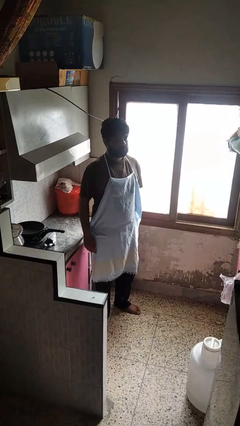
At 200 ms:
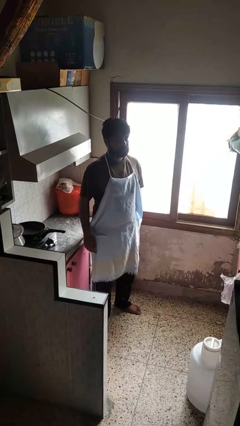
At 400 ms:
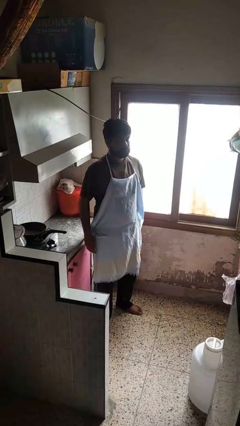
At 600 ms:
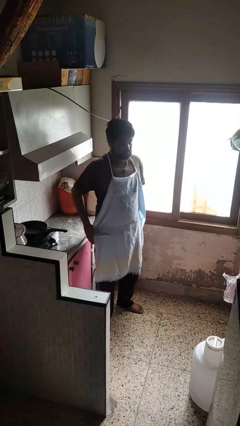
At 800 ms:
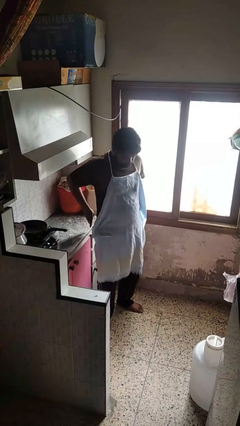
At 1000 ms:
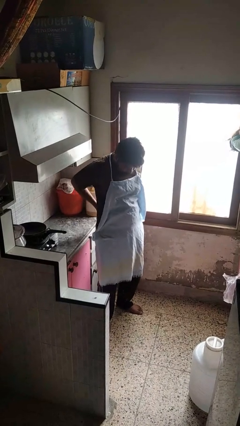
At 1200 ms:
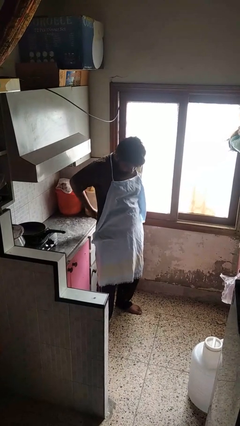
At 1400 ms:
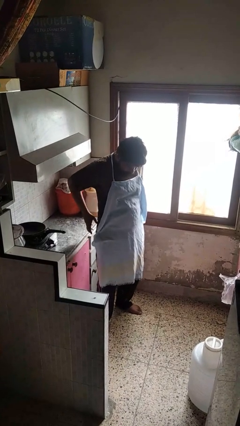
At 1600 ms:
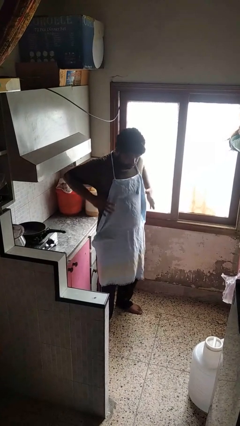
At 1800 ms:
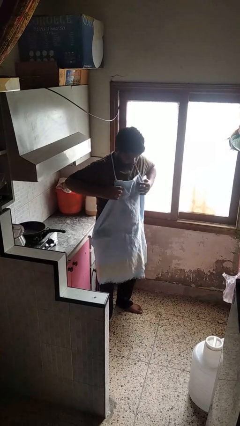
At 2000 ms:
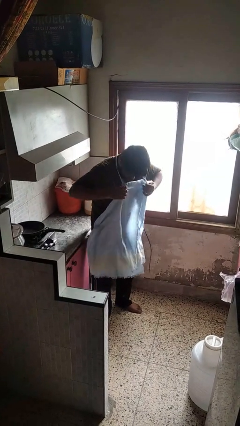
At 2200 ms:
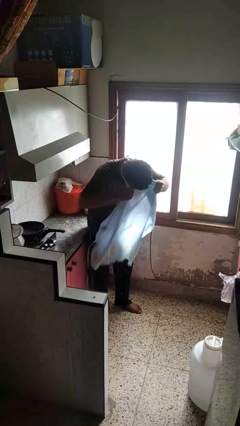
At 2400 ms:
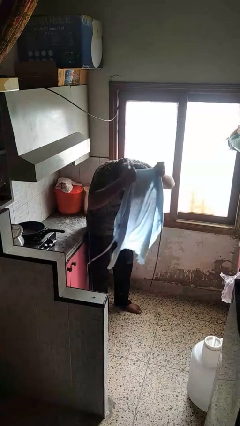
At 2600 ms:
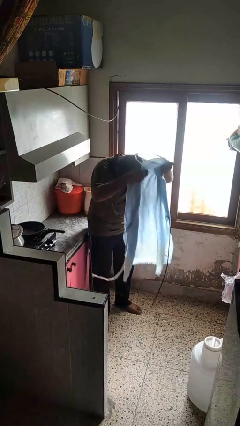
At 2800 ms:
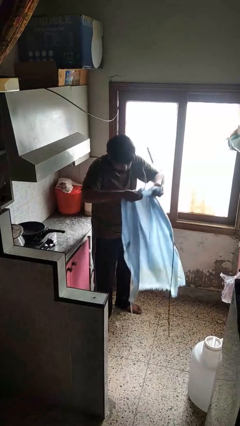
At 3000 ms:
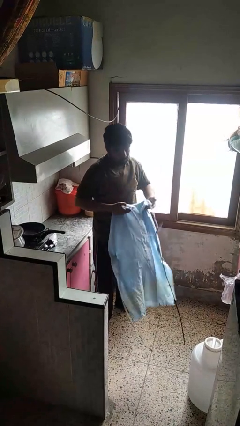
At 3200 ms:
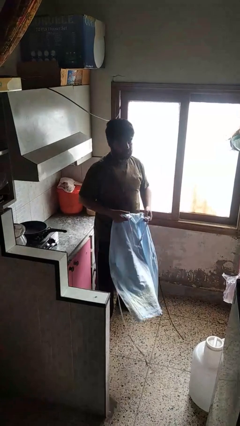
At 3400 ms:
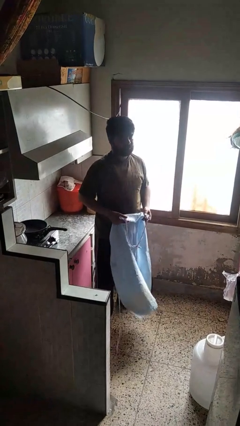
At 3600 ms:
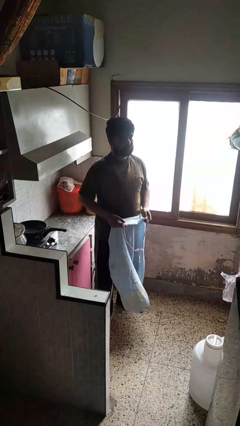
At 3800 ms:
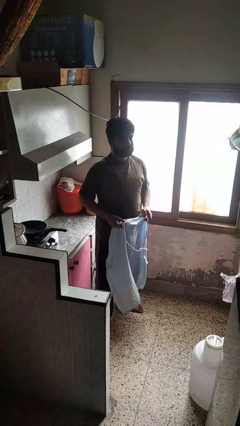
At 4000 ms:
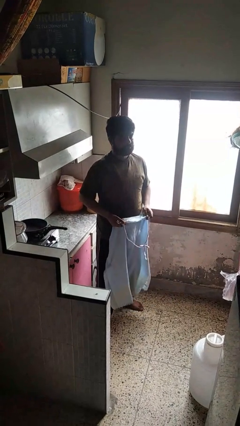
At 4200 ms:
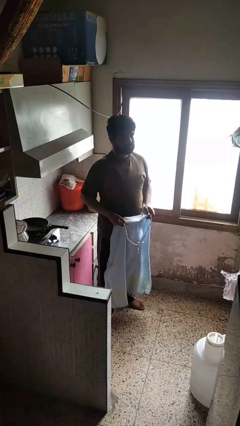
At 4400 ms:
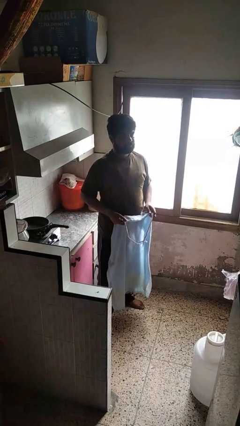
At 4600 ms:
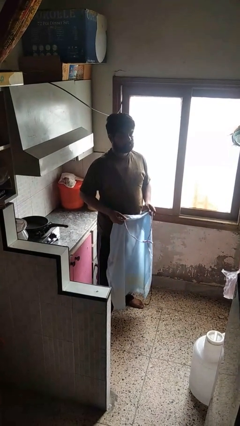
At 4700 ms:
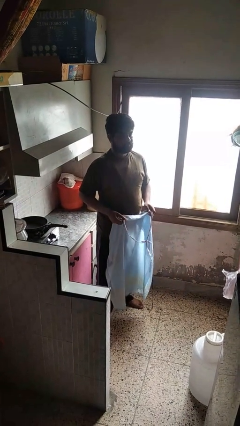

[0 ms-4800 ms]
person takes off apron

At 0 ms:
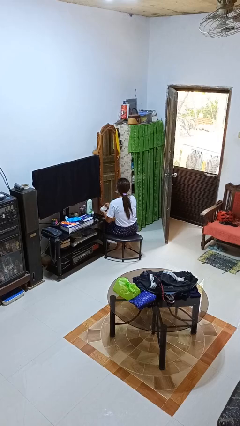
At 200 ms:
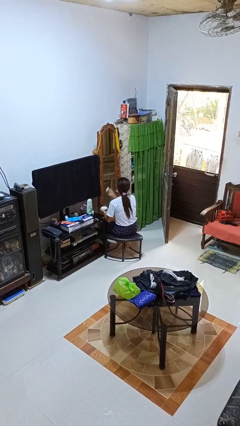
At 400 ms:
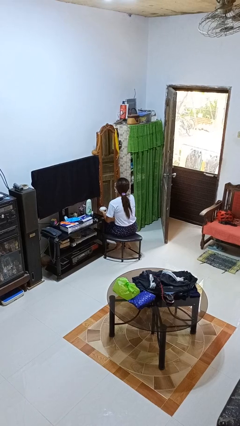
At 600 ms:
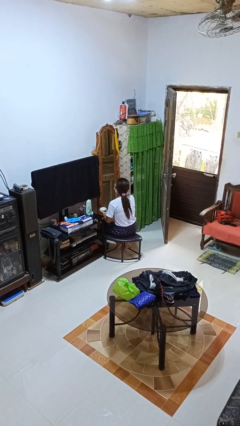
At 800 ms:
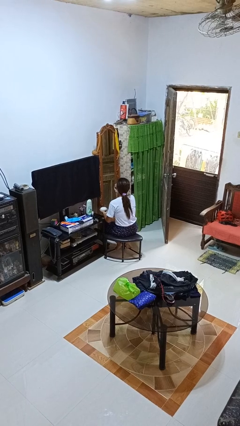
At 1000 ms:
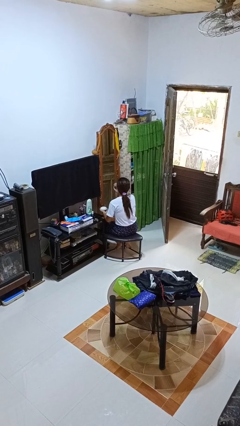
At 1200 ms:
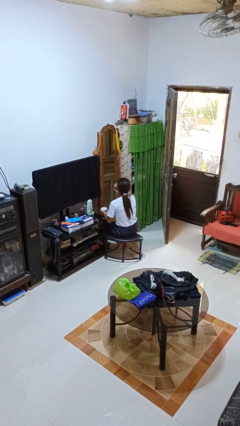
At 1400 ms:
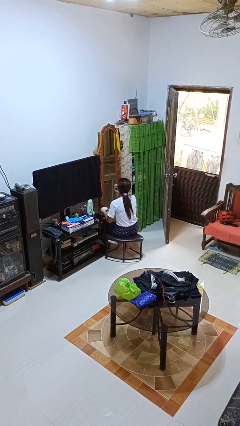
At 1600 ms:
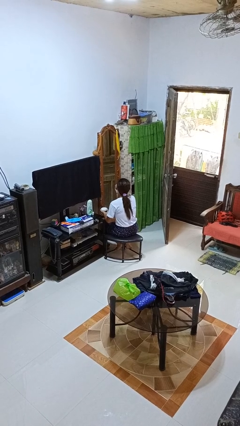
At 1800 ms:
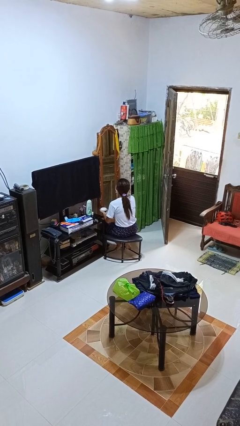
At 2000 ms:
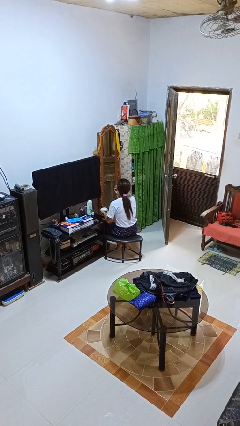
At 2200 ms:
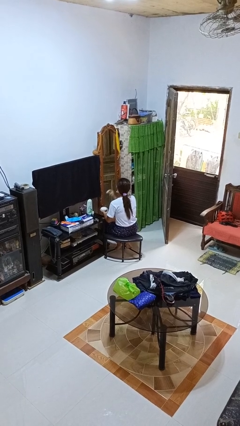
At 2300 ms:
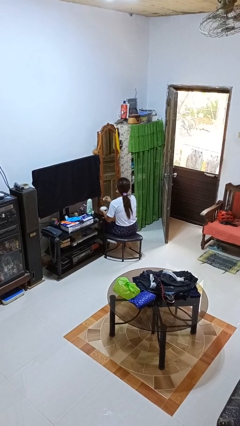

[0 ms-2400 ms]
person applies foundation makeup

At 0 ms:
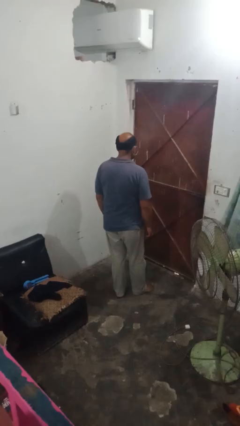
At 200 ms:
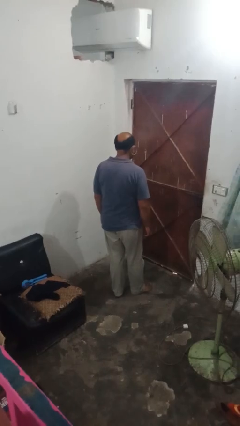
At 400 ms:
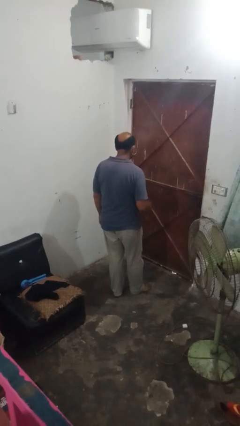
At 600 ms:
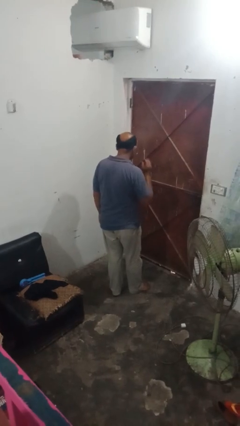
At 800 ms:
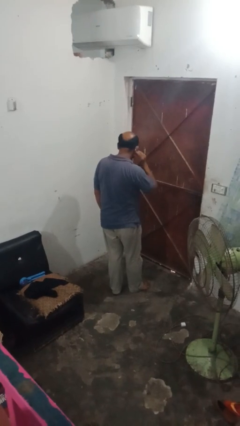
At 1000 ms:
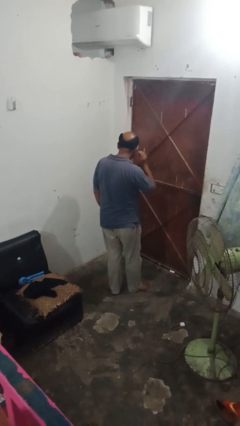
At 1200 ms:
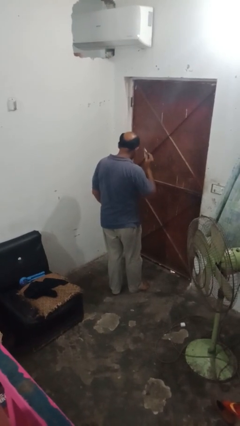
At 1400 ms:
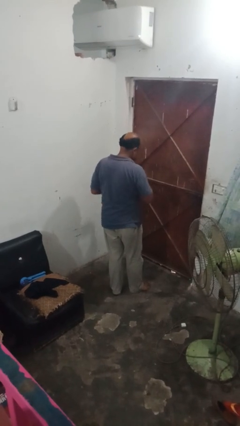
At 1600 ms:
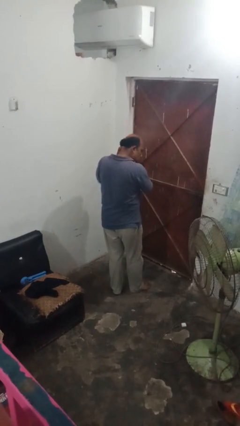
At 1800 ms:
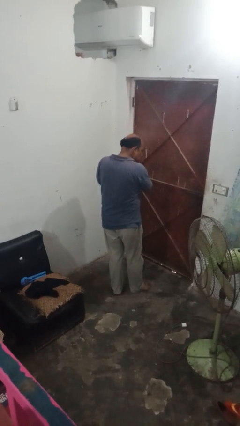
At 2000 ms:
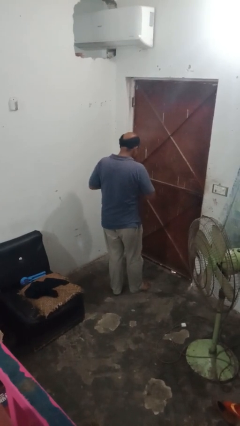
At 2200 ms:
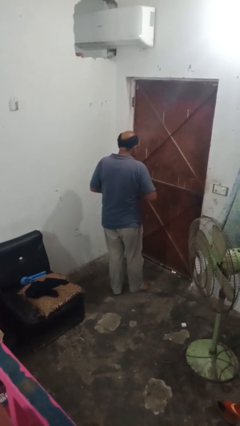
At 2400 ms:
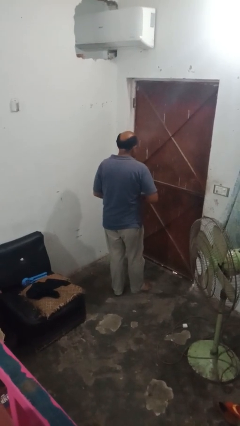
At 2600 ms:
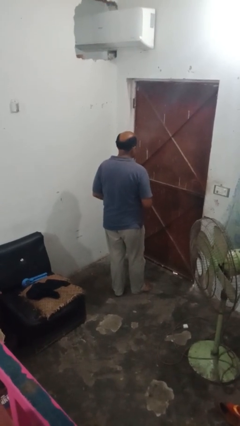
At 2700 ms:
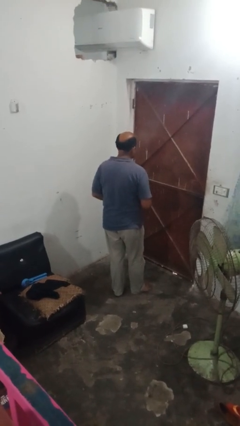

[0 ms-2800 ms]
person takes off earrings

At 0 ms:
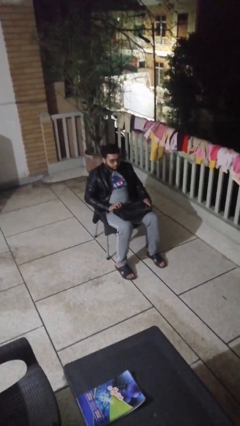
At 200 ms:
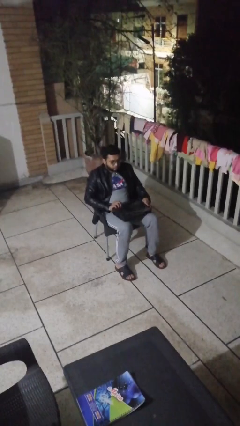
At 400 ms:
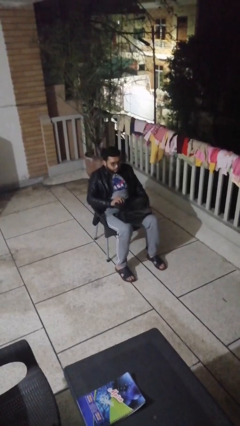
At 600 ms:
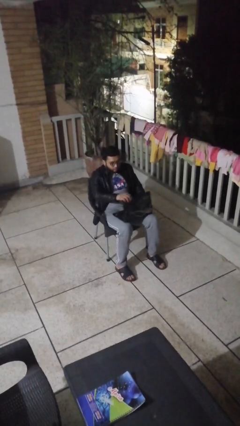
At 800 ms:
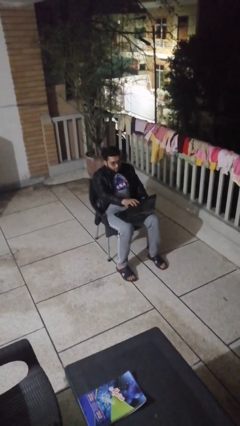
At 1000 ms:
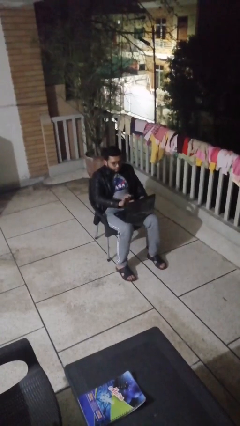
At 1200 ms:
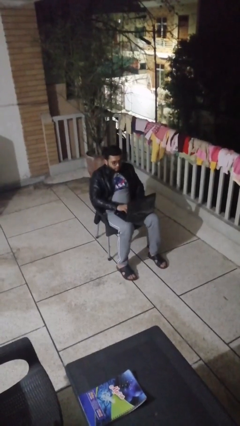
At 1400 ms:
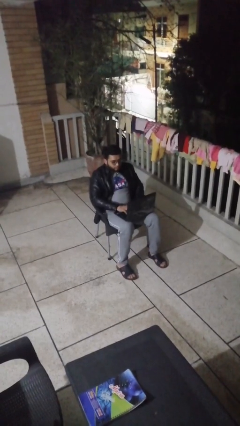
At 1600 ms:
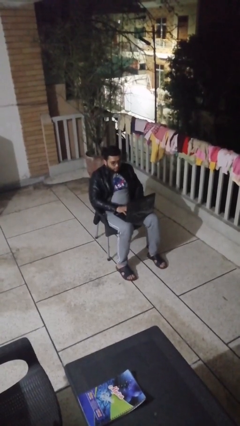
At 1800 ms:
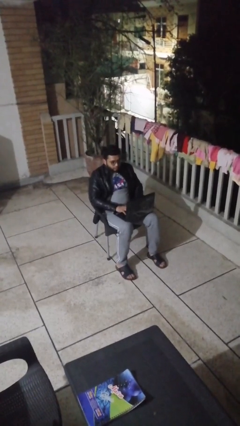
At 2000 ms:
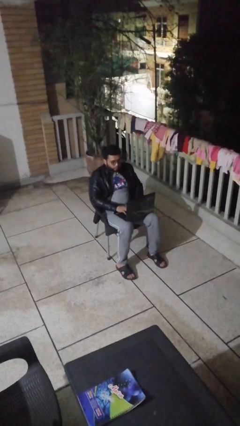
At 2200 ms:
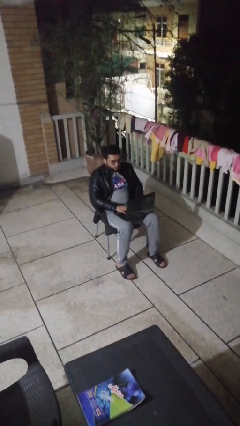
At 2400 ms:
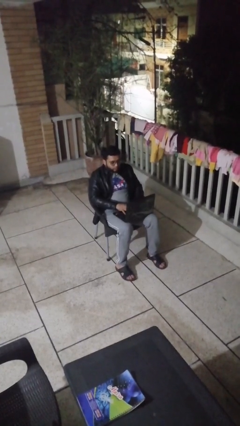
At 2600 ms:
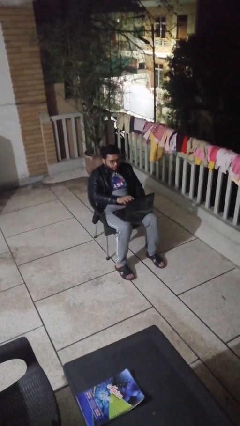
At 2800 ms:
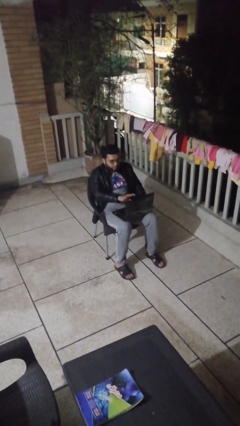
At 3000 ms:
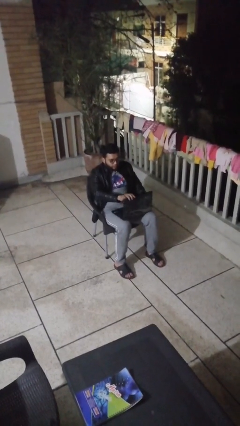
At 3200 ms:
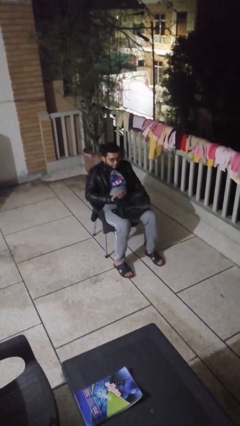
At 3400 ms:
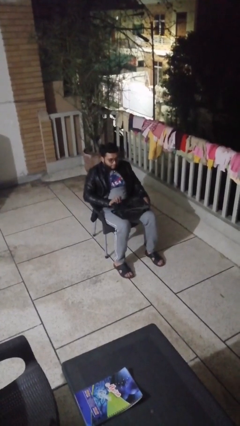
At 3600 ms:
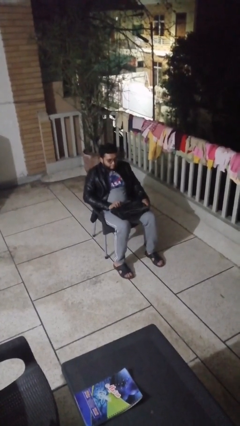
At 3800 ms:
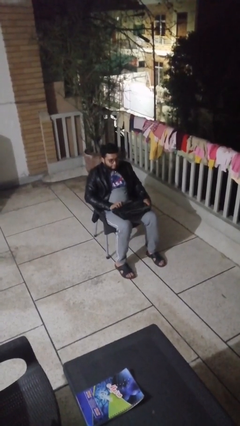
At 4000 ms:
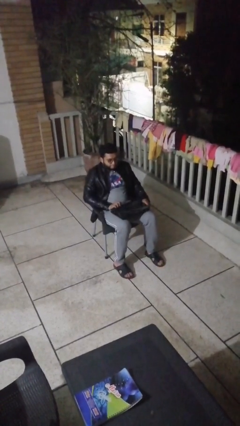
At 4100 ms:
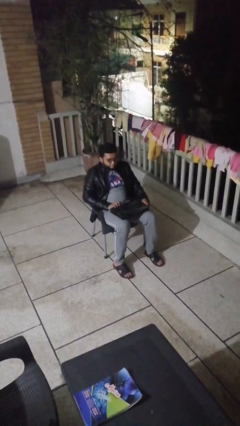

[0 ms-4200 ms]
person interacts with laptop

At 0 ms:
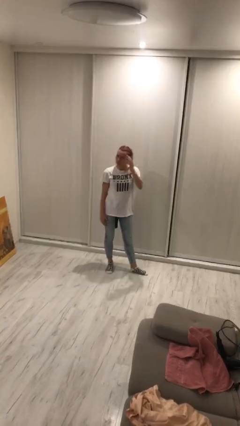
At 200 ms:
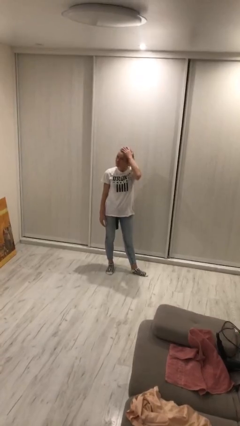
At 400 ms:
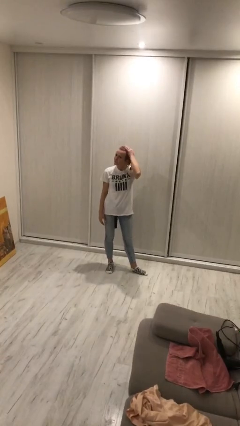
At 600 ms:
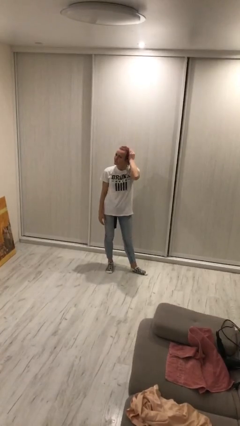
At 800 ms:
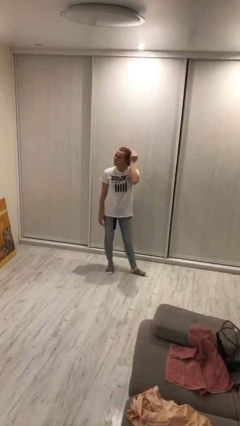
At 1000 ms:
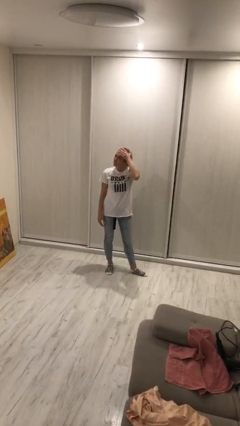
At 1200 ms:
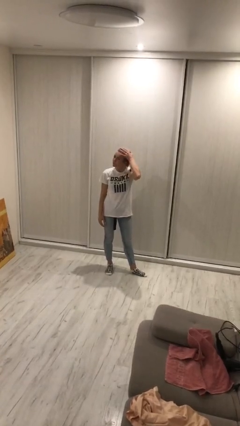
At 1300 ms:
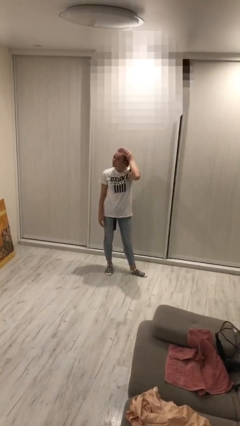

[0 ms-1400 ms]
person pats head

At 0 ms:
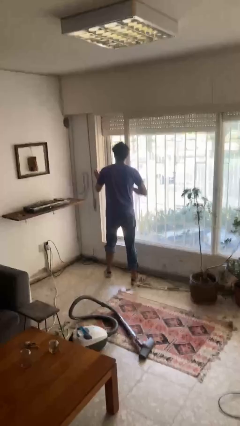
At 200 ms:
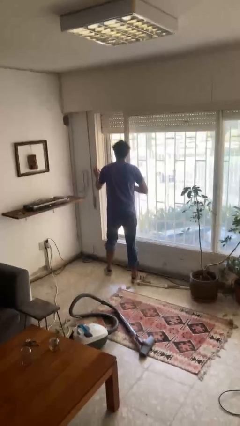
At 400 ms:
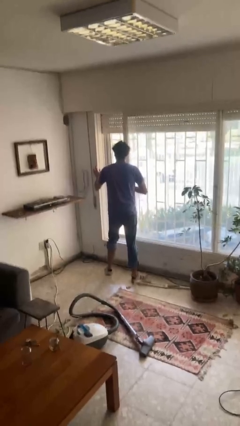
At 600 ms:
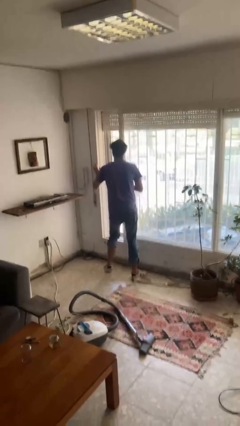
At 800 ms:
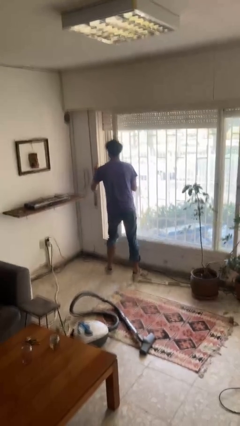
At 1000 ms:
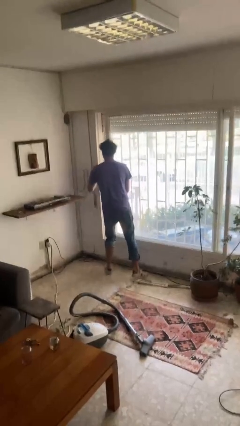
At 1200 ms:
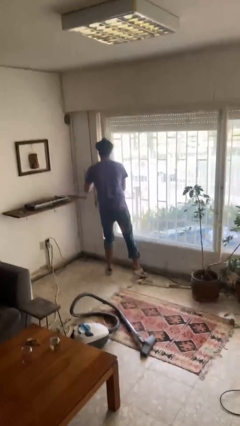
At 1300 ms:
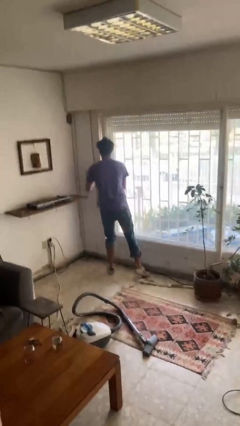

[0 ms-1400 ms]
person closes sliding door

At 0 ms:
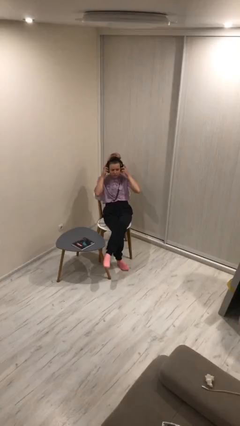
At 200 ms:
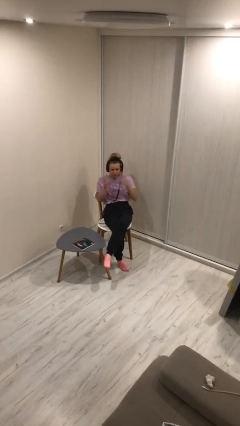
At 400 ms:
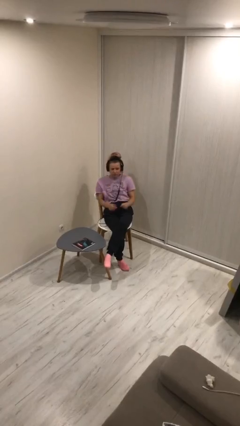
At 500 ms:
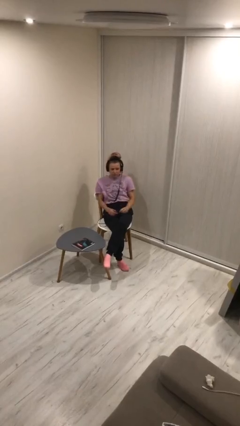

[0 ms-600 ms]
person puts on headphones
